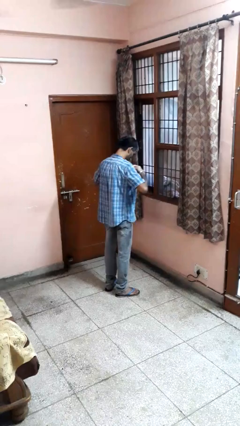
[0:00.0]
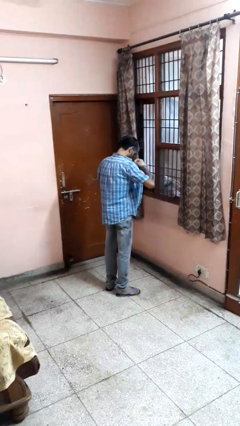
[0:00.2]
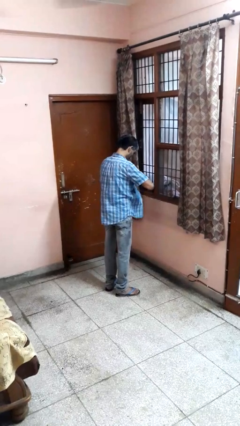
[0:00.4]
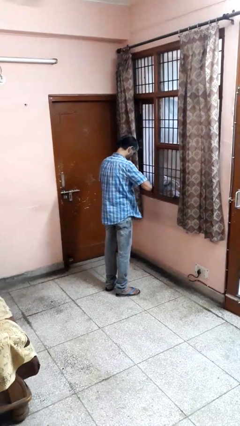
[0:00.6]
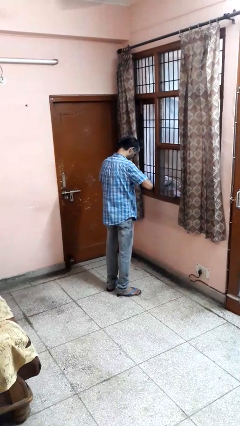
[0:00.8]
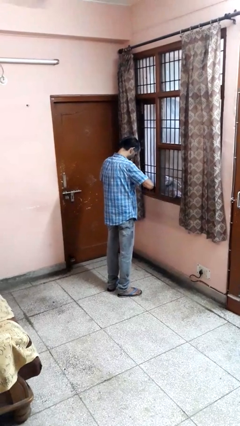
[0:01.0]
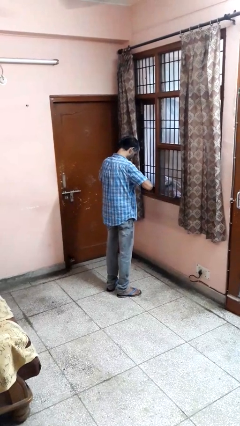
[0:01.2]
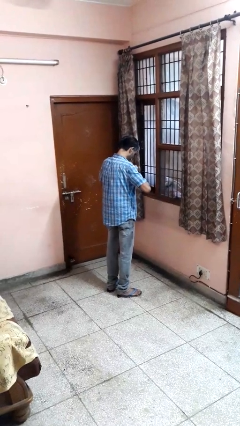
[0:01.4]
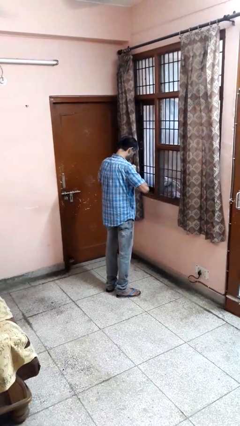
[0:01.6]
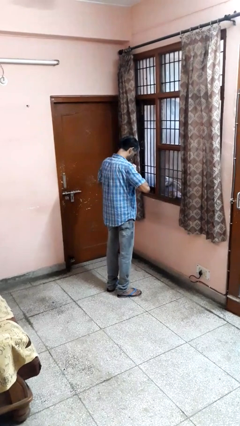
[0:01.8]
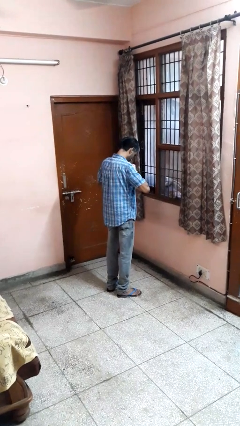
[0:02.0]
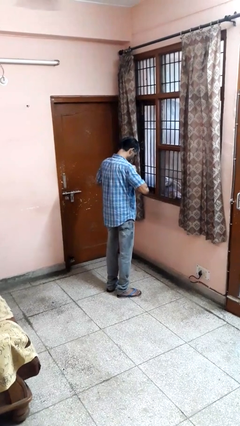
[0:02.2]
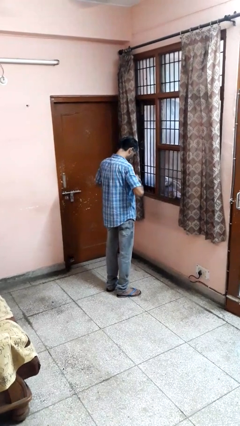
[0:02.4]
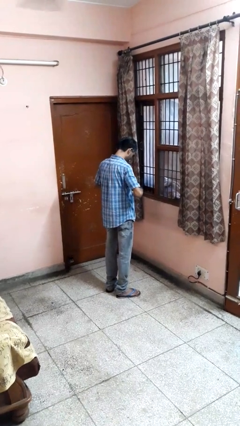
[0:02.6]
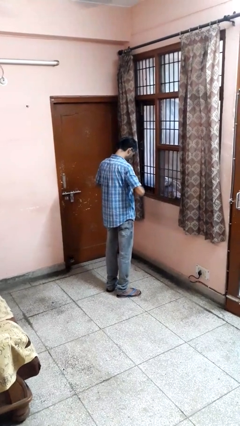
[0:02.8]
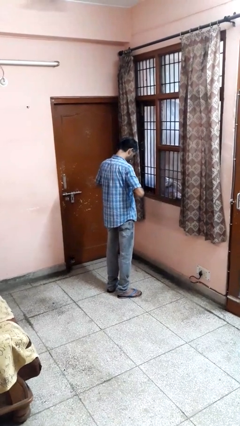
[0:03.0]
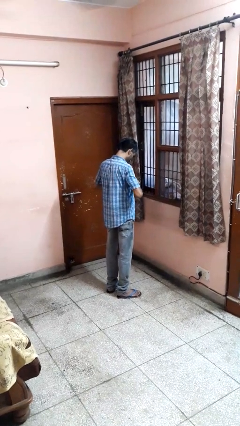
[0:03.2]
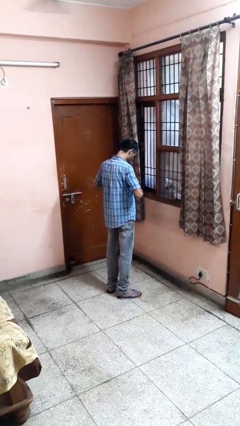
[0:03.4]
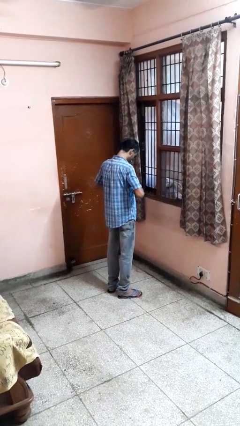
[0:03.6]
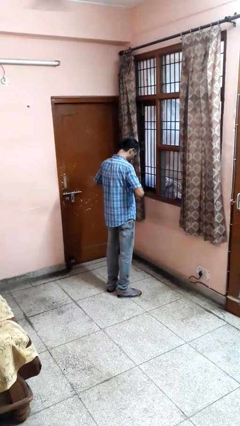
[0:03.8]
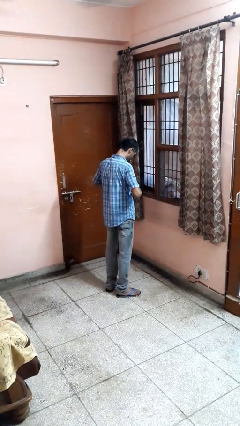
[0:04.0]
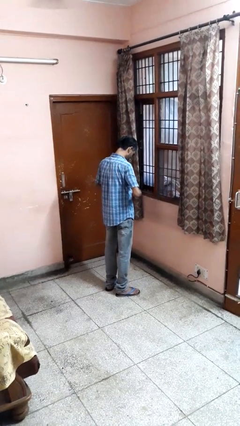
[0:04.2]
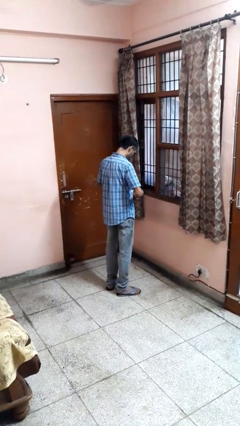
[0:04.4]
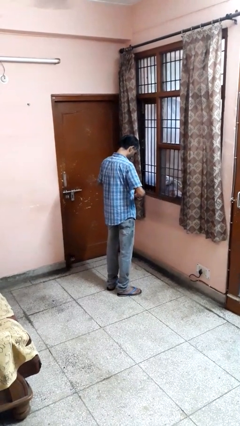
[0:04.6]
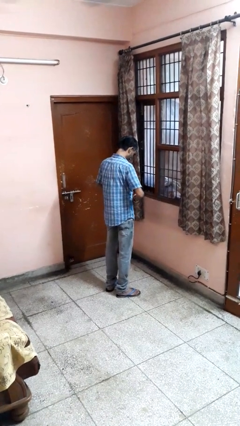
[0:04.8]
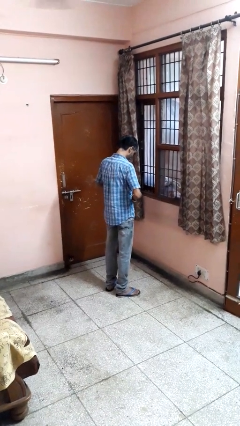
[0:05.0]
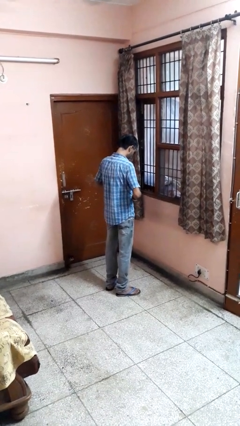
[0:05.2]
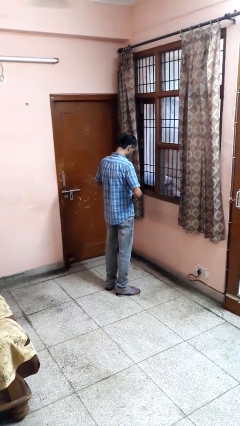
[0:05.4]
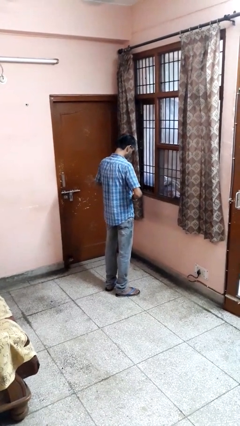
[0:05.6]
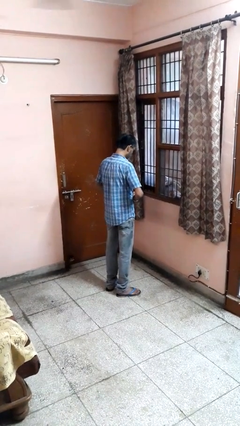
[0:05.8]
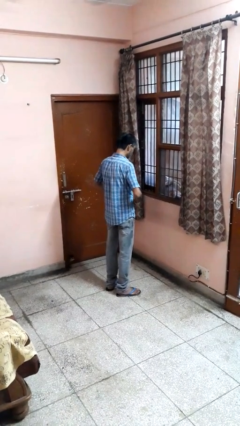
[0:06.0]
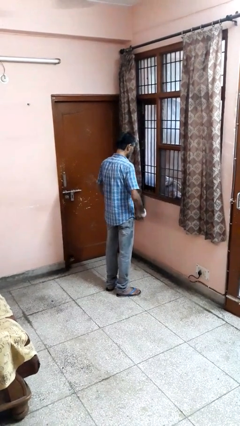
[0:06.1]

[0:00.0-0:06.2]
person buttons shirt

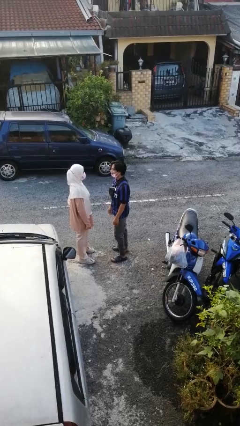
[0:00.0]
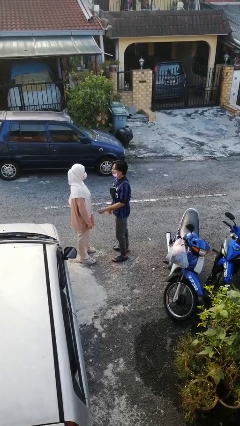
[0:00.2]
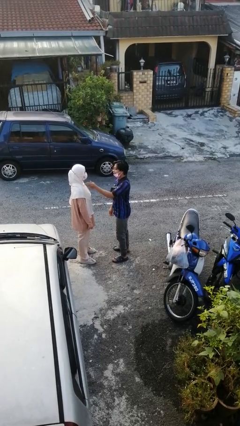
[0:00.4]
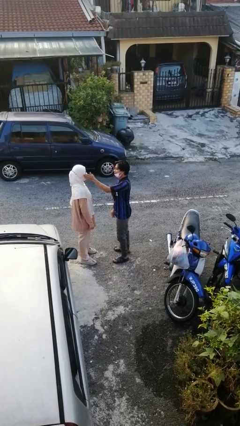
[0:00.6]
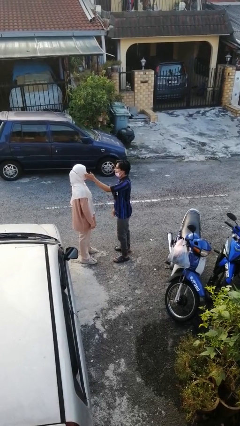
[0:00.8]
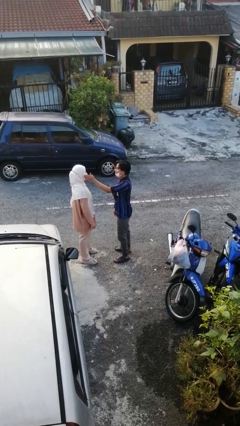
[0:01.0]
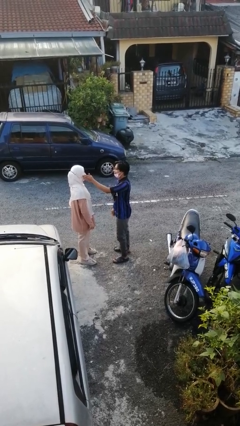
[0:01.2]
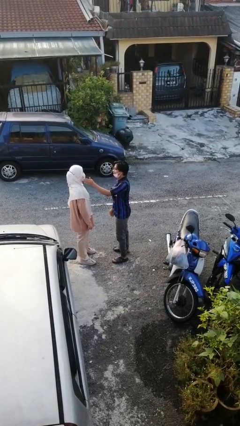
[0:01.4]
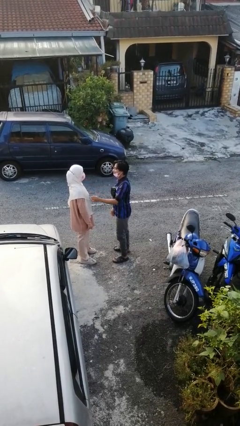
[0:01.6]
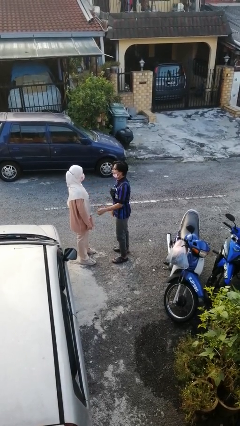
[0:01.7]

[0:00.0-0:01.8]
person touches face of person

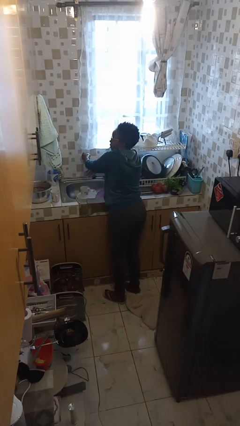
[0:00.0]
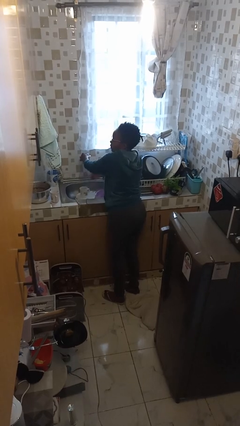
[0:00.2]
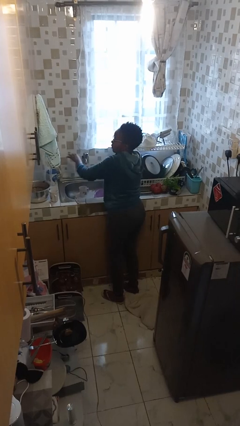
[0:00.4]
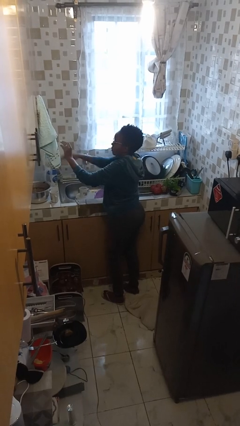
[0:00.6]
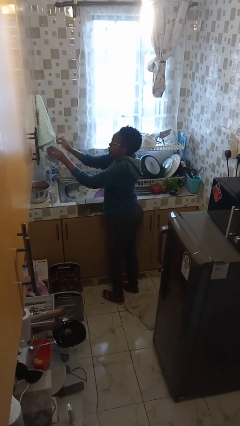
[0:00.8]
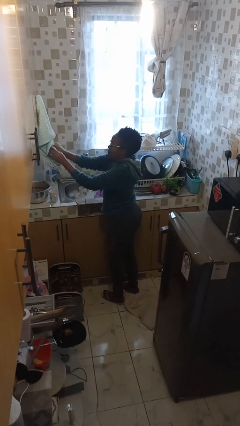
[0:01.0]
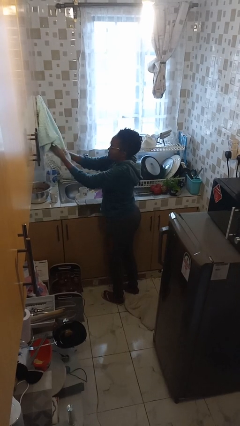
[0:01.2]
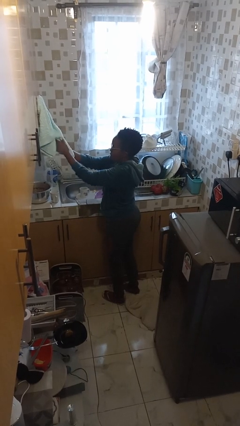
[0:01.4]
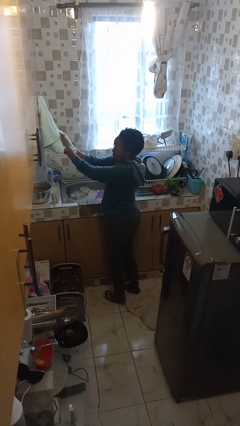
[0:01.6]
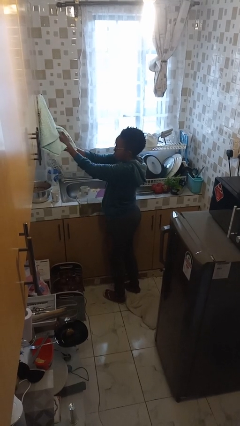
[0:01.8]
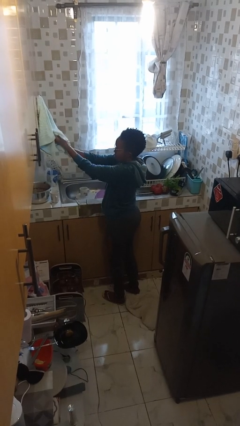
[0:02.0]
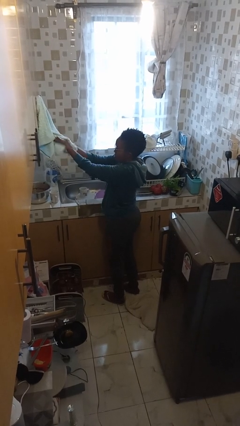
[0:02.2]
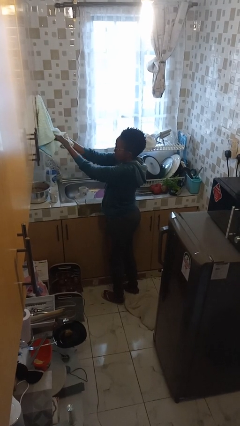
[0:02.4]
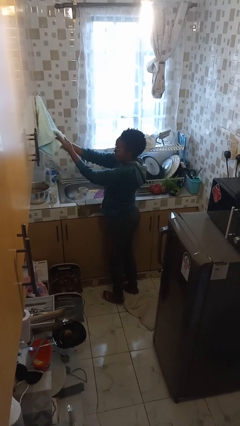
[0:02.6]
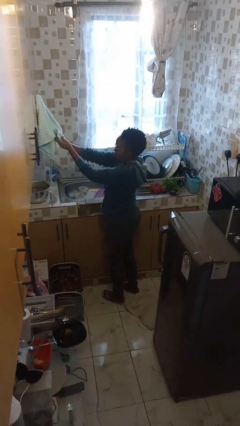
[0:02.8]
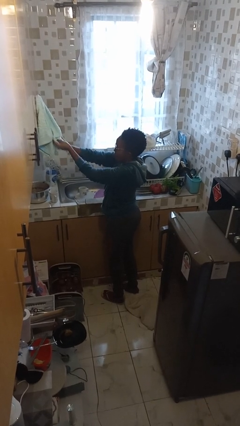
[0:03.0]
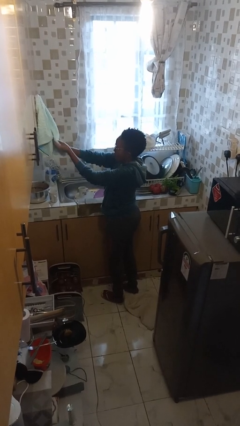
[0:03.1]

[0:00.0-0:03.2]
person dries hands with towel

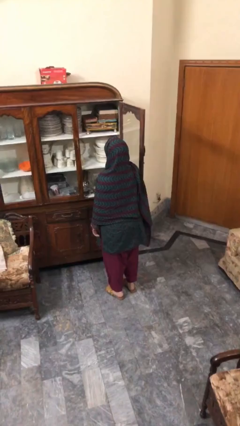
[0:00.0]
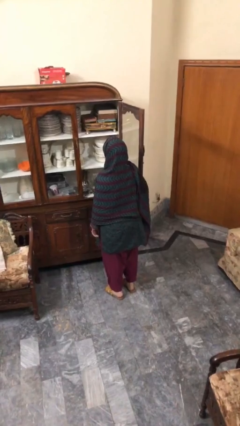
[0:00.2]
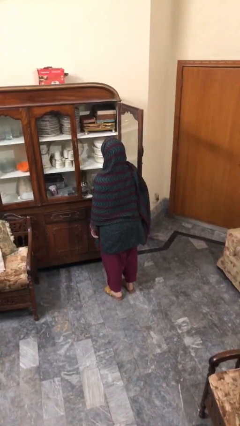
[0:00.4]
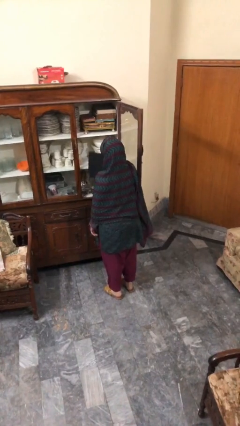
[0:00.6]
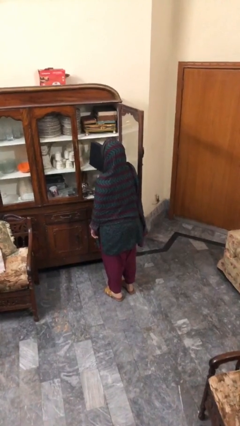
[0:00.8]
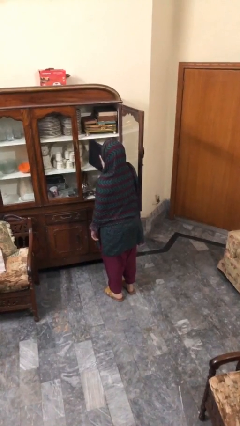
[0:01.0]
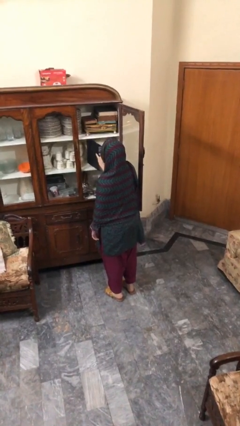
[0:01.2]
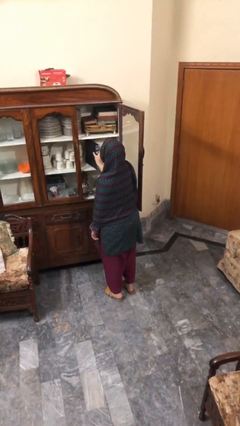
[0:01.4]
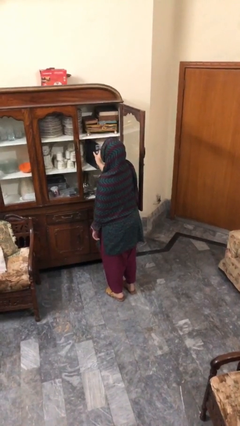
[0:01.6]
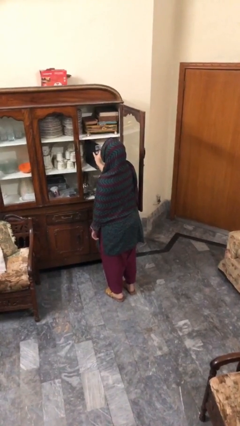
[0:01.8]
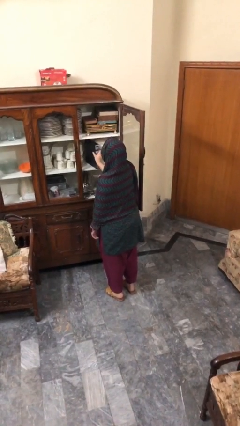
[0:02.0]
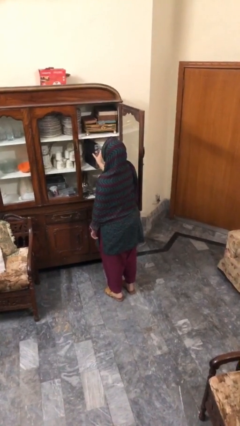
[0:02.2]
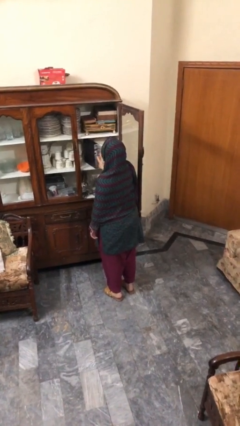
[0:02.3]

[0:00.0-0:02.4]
person puts down object into cabinet

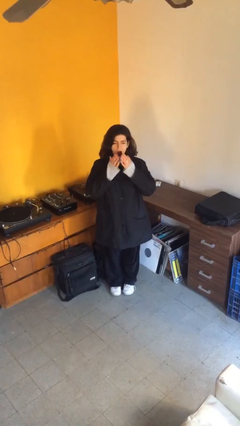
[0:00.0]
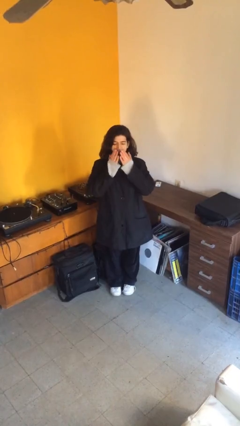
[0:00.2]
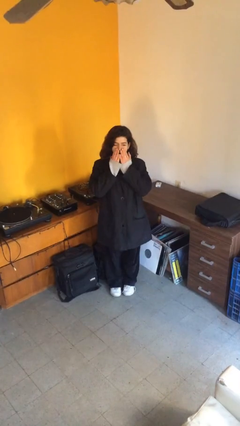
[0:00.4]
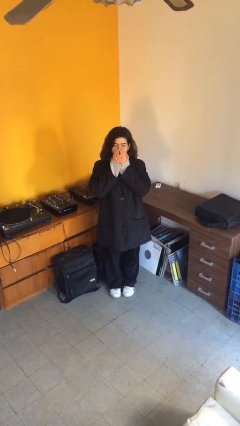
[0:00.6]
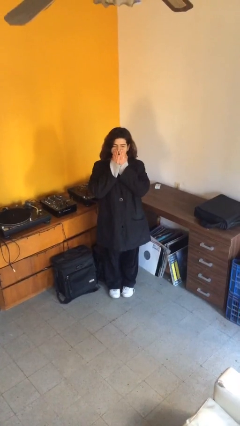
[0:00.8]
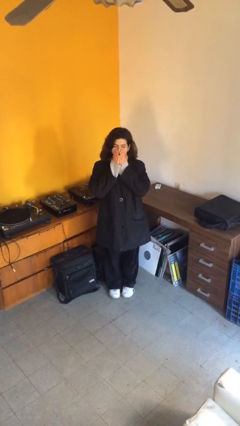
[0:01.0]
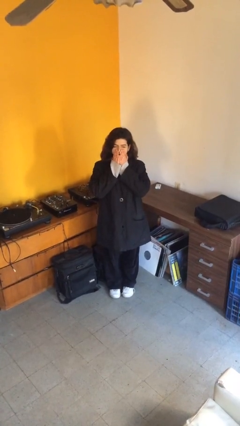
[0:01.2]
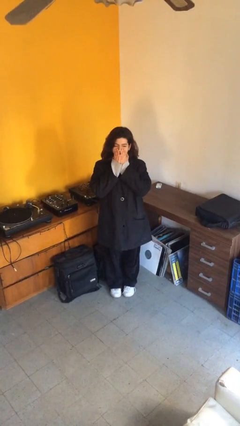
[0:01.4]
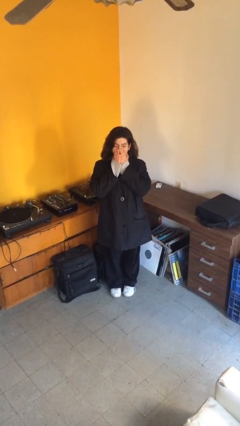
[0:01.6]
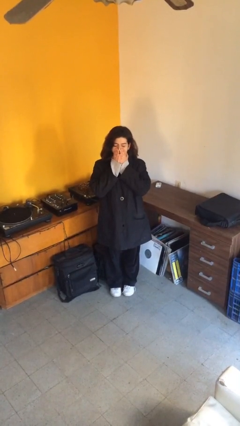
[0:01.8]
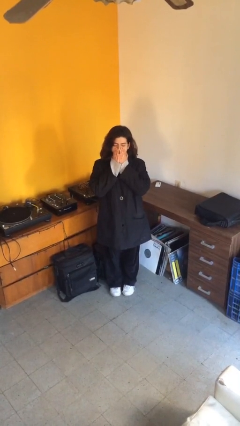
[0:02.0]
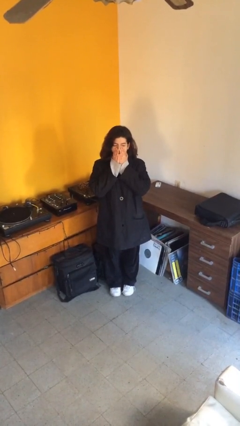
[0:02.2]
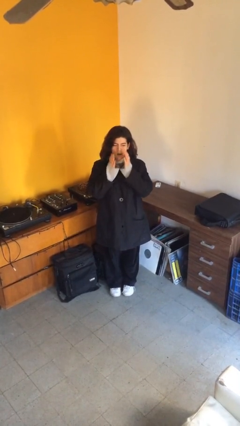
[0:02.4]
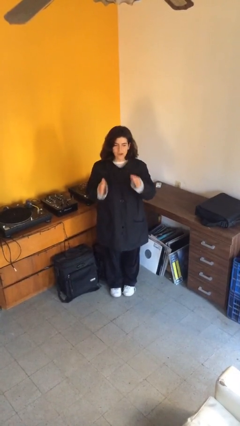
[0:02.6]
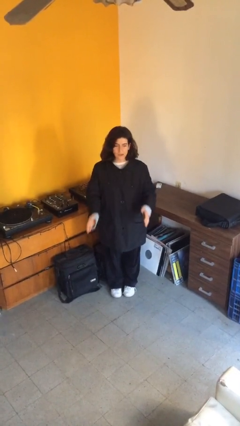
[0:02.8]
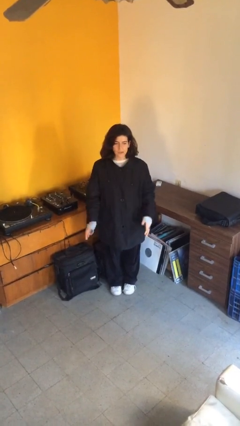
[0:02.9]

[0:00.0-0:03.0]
person yawns

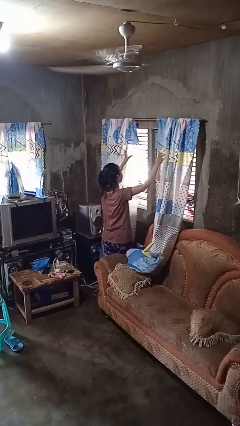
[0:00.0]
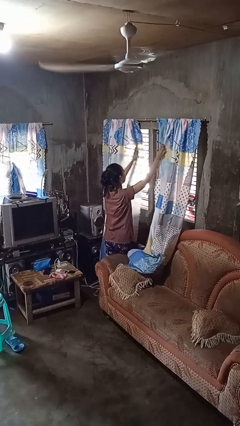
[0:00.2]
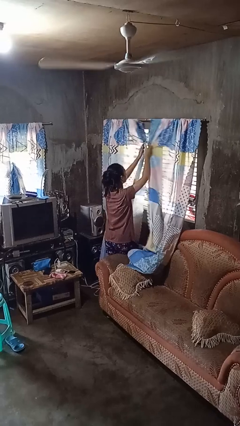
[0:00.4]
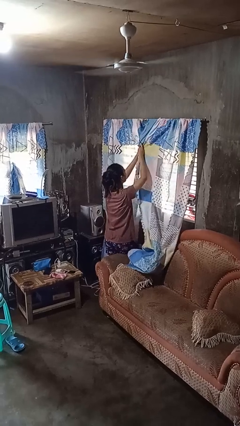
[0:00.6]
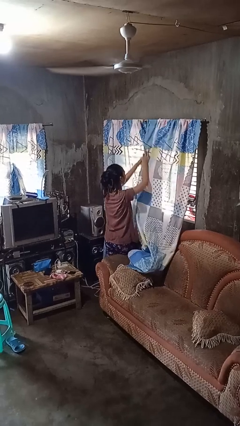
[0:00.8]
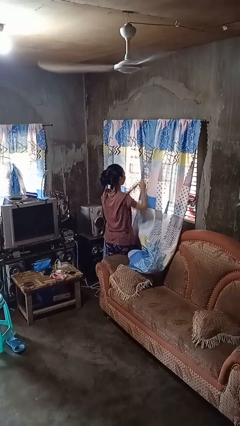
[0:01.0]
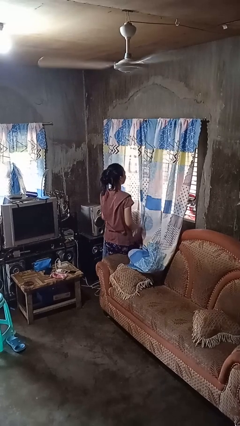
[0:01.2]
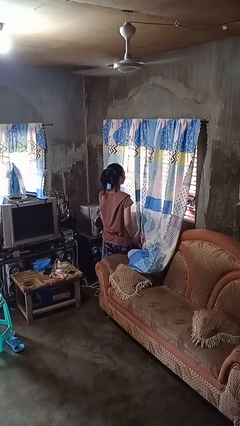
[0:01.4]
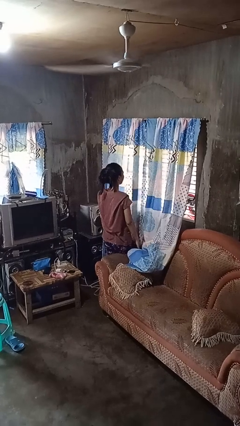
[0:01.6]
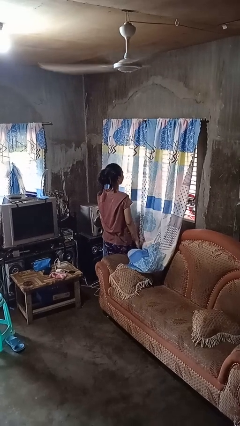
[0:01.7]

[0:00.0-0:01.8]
person closes curtains
